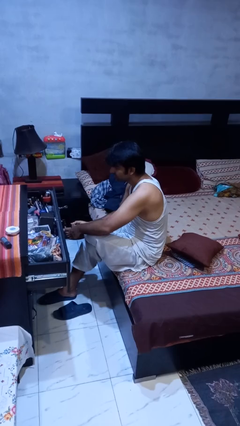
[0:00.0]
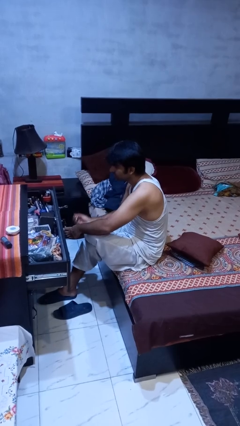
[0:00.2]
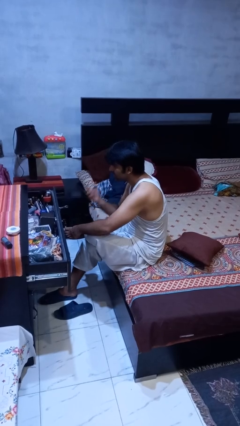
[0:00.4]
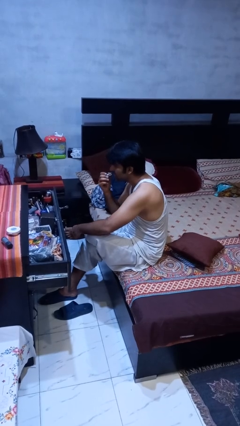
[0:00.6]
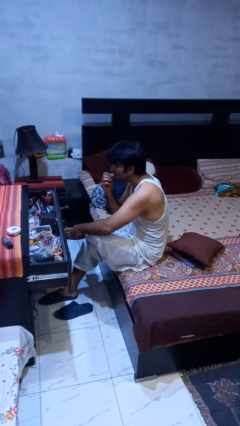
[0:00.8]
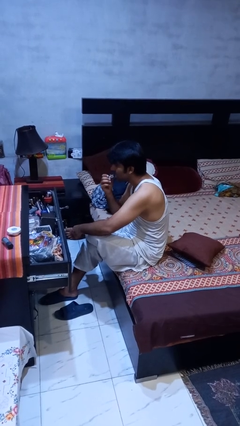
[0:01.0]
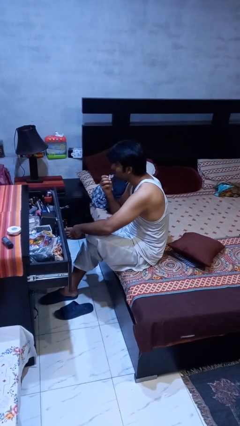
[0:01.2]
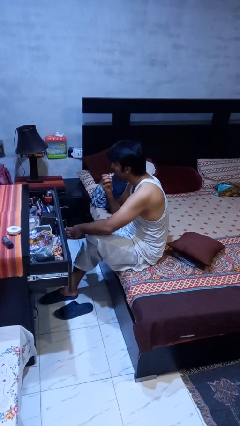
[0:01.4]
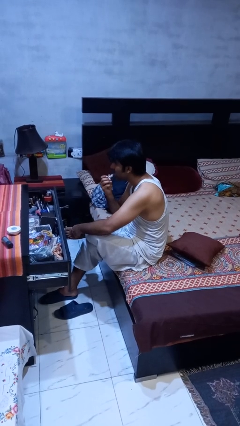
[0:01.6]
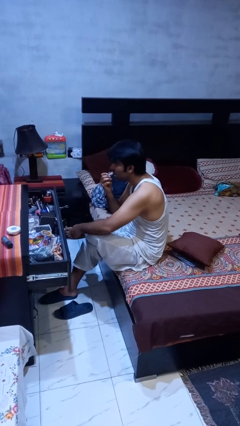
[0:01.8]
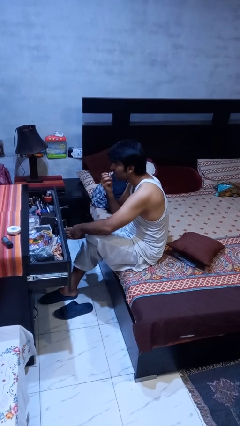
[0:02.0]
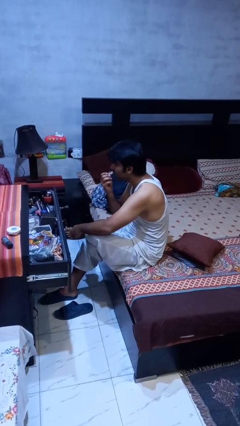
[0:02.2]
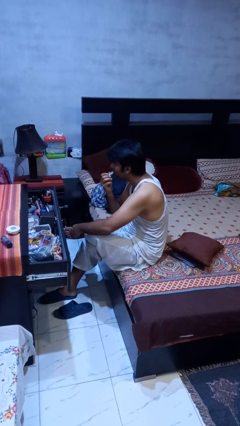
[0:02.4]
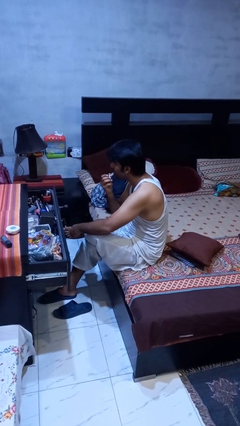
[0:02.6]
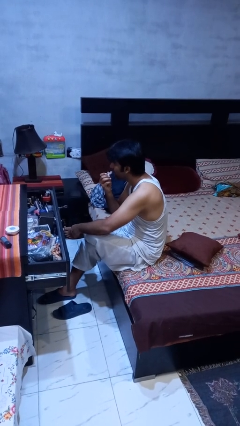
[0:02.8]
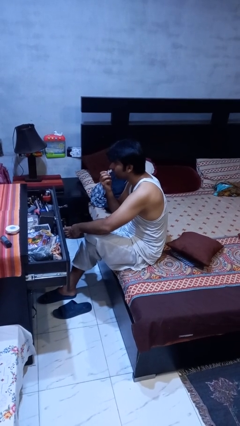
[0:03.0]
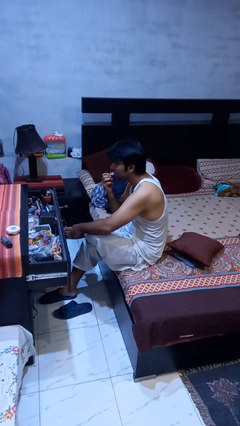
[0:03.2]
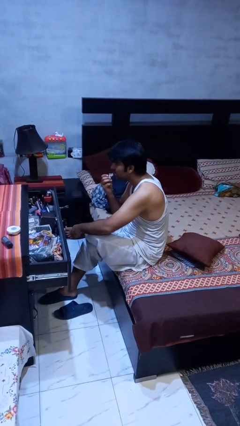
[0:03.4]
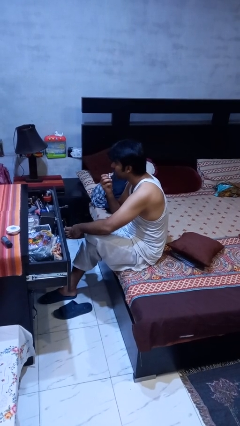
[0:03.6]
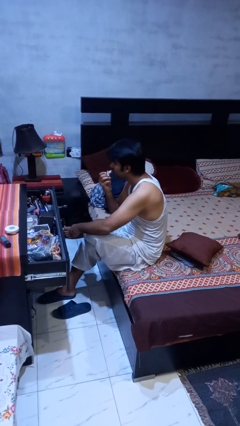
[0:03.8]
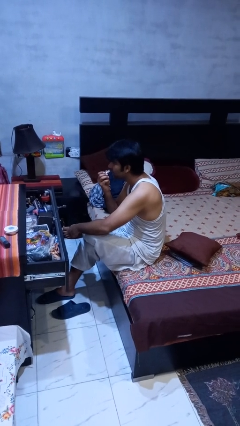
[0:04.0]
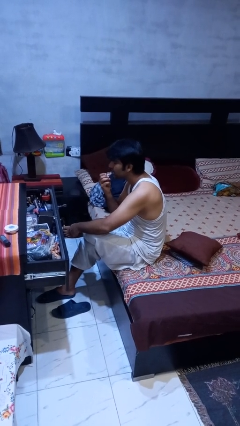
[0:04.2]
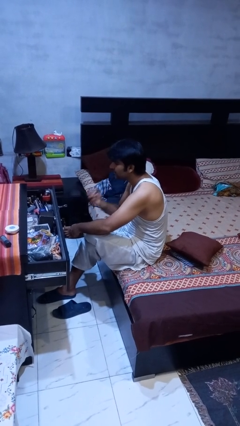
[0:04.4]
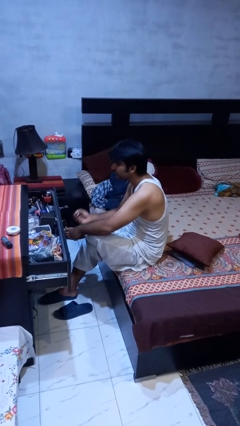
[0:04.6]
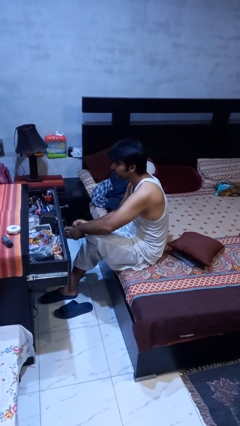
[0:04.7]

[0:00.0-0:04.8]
person applies lip makeup

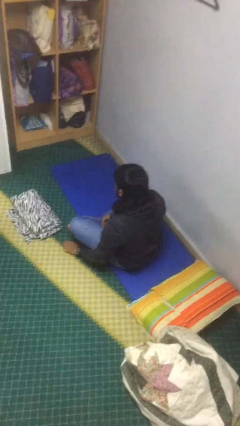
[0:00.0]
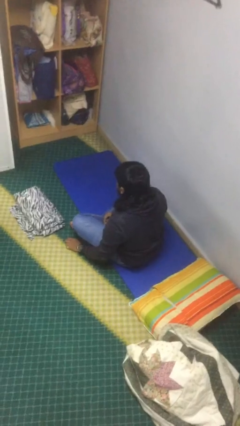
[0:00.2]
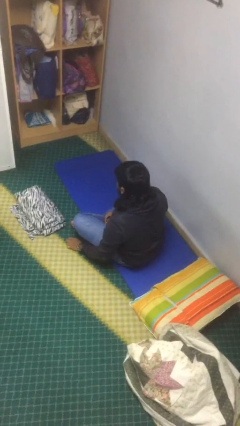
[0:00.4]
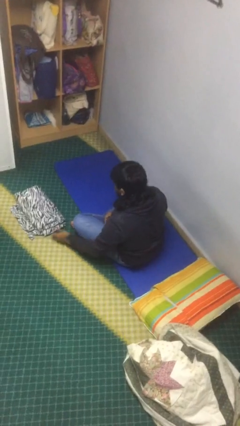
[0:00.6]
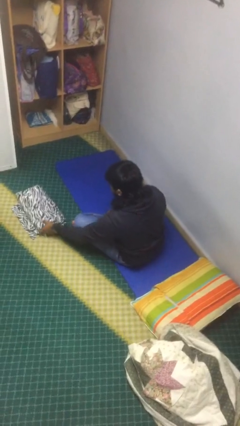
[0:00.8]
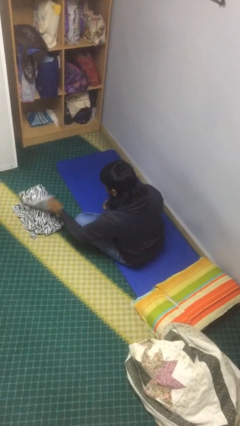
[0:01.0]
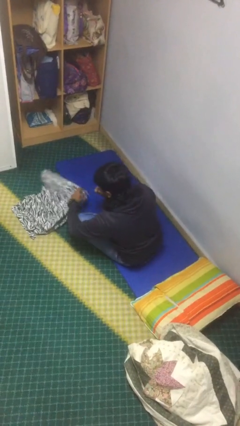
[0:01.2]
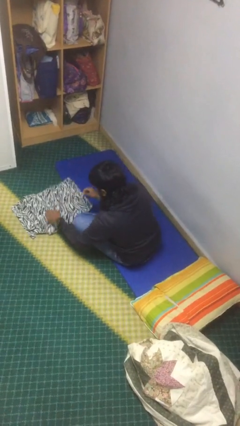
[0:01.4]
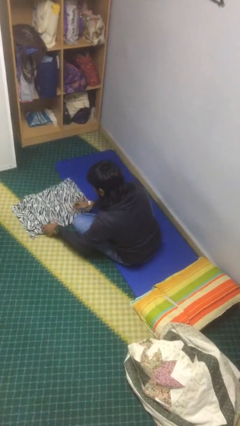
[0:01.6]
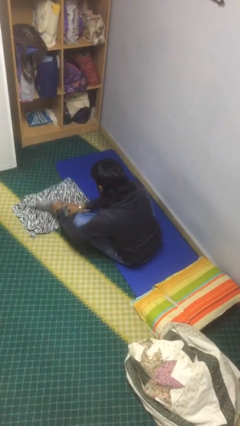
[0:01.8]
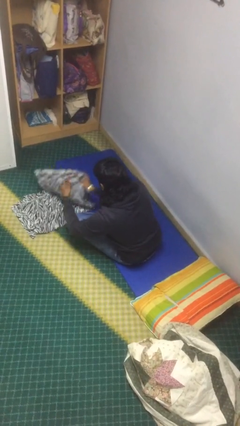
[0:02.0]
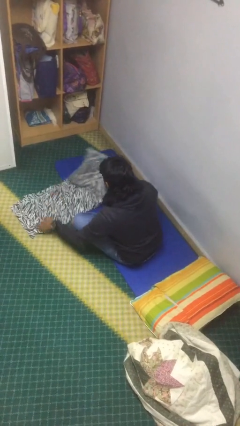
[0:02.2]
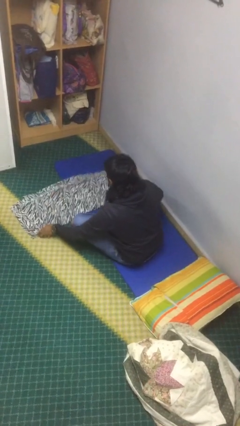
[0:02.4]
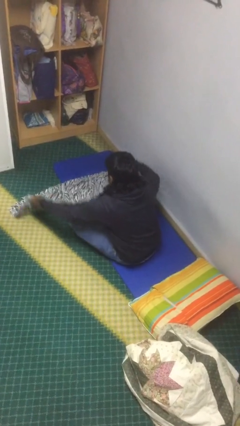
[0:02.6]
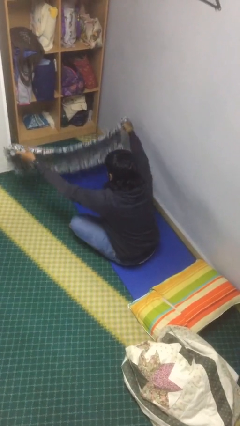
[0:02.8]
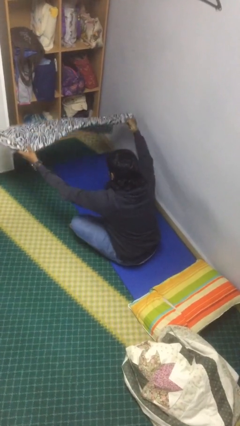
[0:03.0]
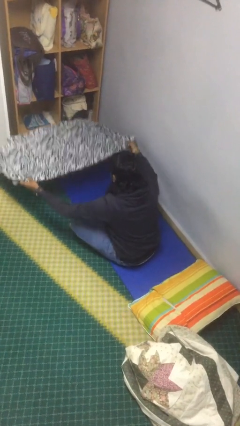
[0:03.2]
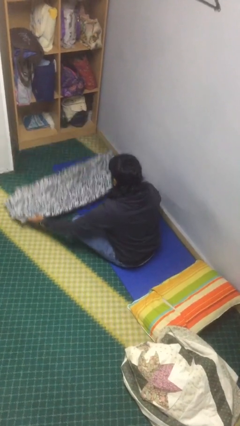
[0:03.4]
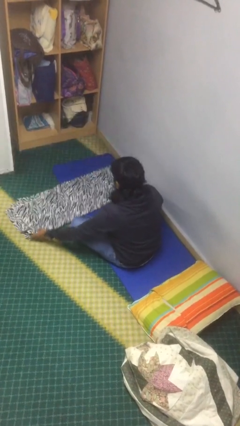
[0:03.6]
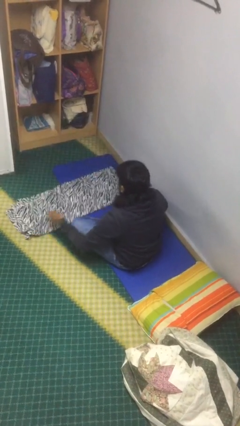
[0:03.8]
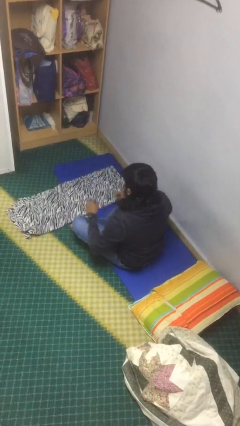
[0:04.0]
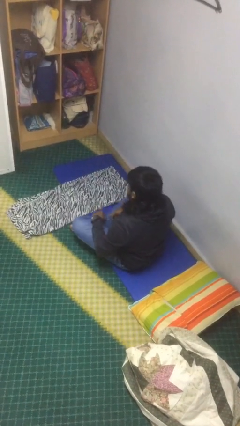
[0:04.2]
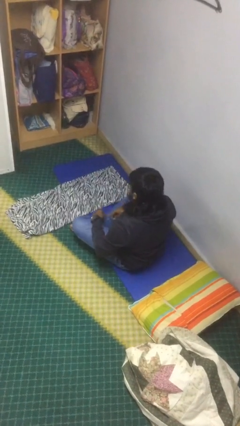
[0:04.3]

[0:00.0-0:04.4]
person unfolds blanket

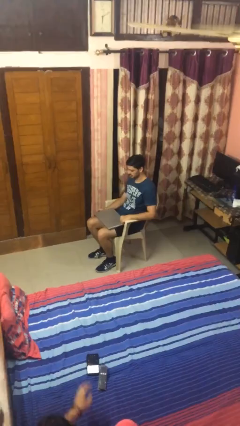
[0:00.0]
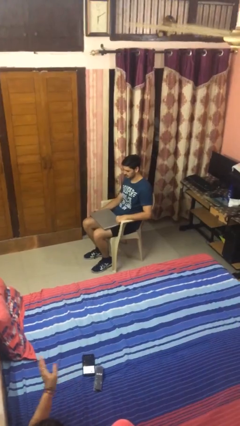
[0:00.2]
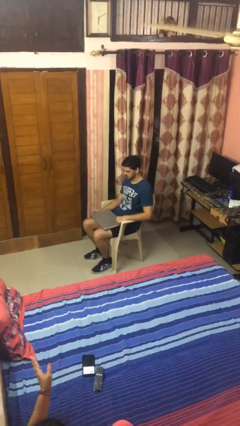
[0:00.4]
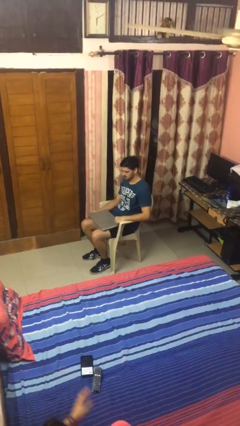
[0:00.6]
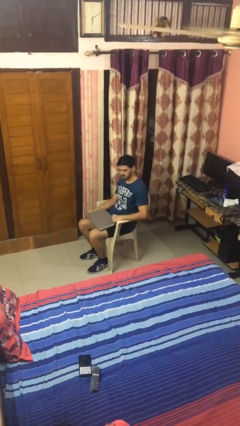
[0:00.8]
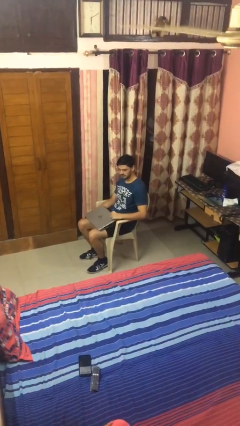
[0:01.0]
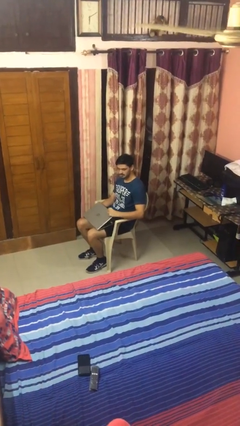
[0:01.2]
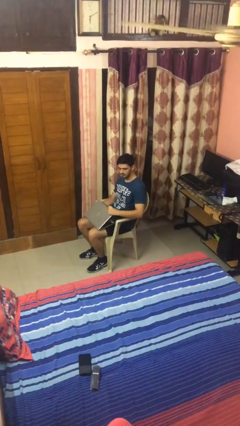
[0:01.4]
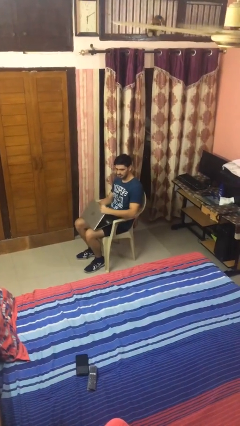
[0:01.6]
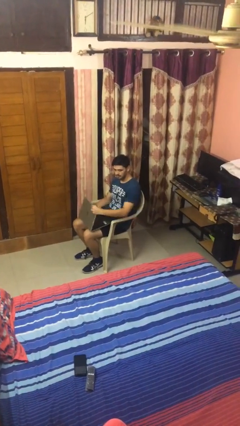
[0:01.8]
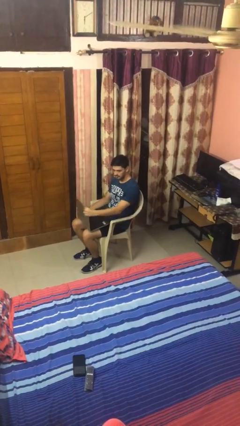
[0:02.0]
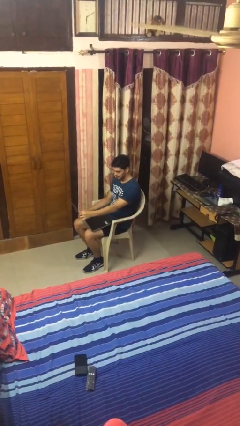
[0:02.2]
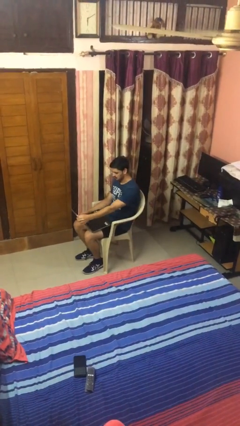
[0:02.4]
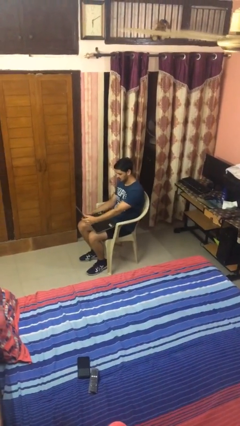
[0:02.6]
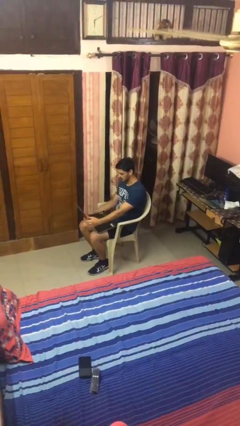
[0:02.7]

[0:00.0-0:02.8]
person opens laptop

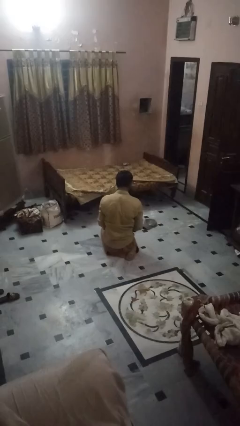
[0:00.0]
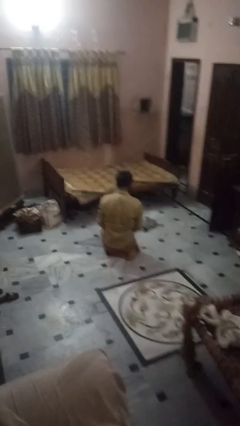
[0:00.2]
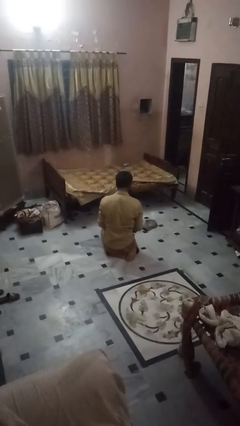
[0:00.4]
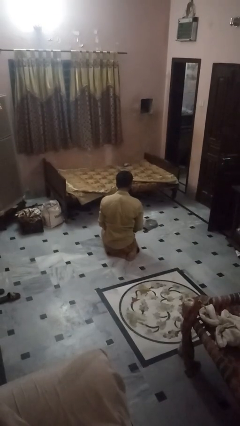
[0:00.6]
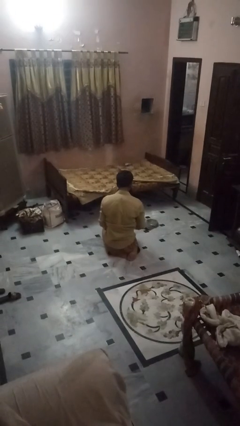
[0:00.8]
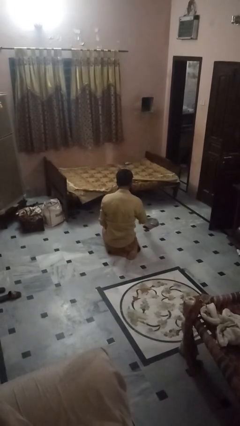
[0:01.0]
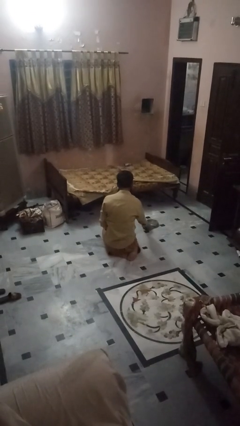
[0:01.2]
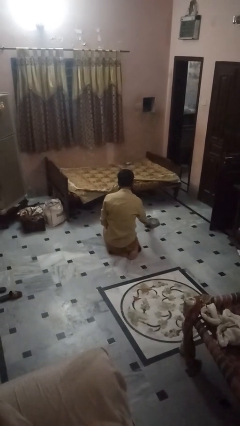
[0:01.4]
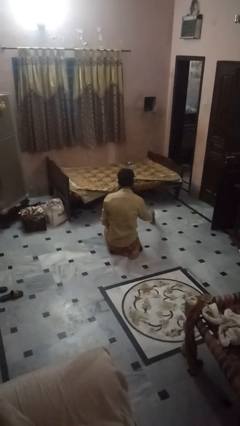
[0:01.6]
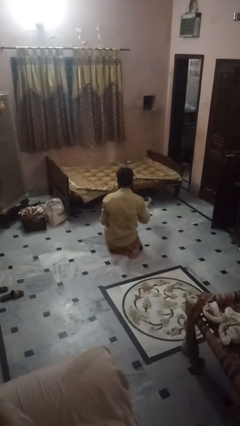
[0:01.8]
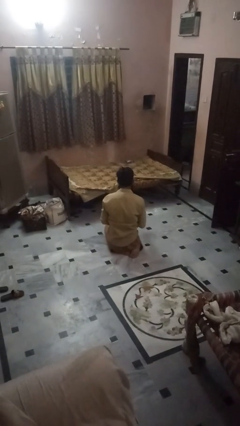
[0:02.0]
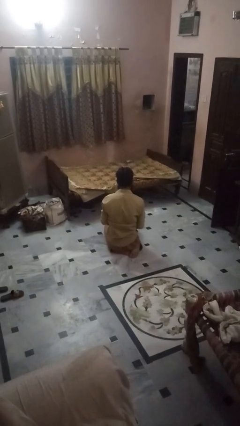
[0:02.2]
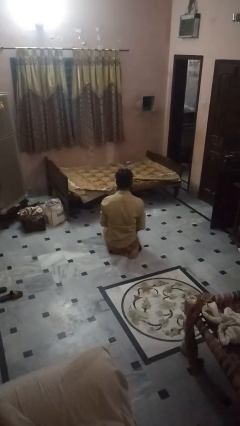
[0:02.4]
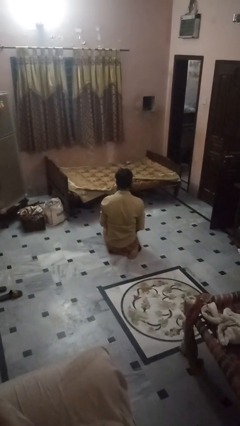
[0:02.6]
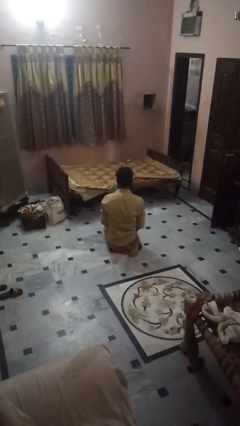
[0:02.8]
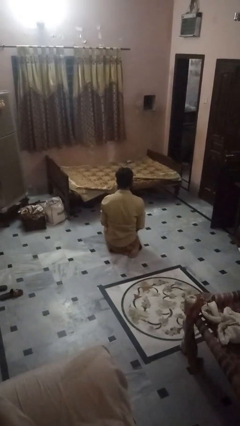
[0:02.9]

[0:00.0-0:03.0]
person picks up object from floor

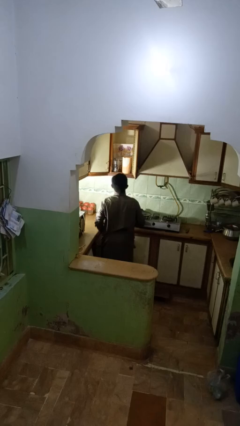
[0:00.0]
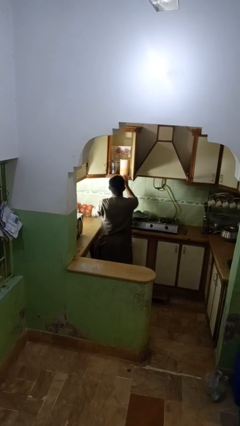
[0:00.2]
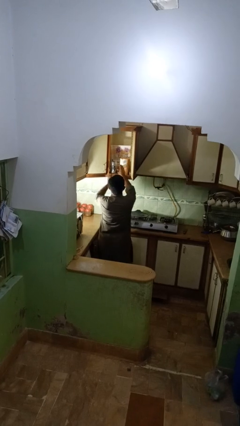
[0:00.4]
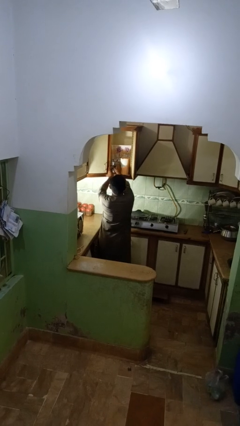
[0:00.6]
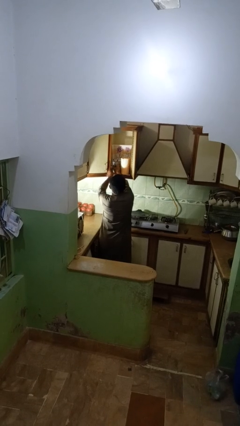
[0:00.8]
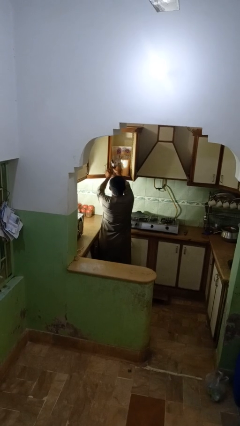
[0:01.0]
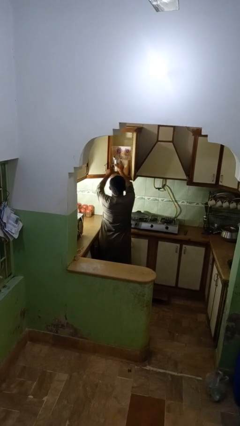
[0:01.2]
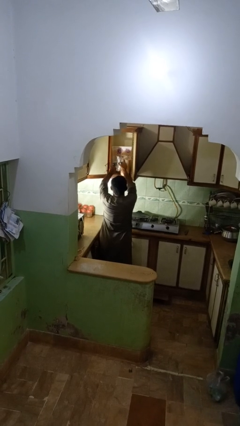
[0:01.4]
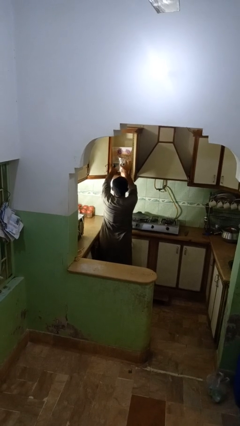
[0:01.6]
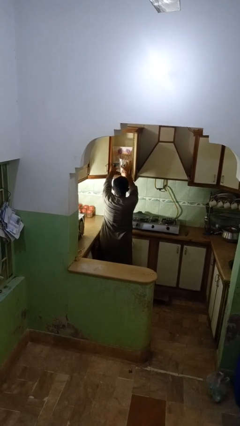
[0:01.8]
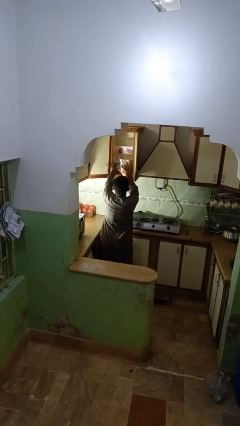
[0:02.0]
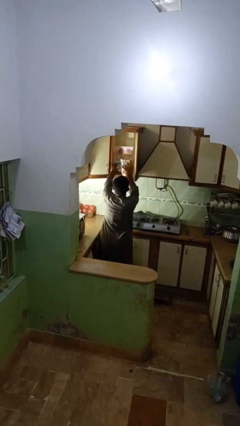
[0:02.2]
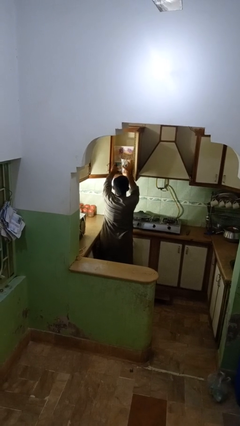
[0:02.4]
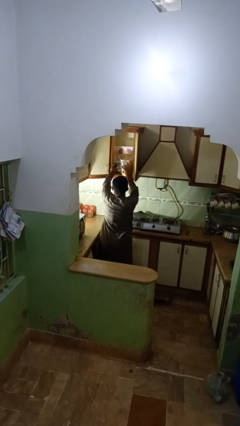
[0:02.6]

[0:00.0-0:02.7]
person searches in kitchen drawer
